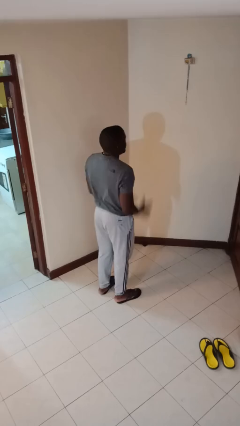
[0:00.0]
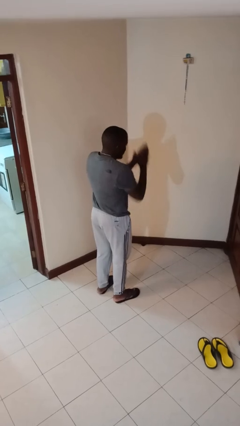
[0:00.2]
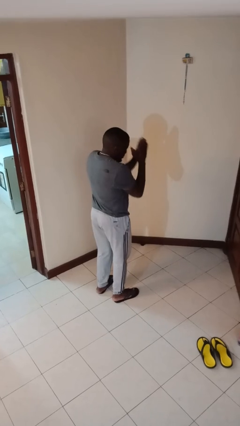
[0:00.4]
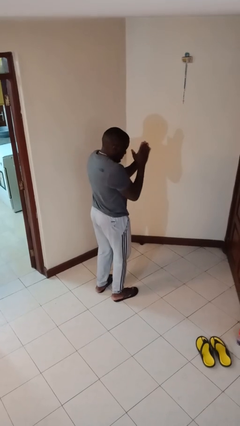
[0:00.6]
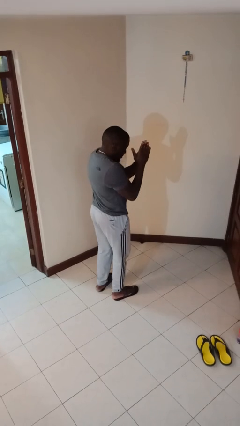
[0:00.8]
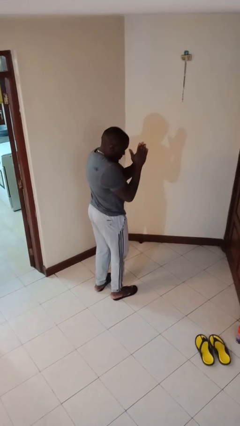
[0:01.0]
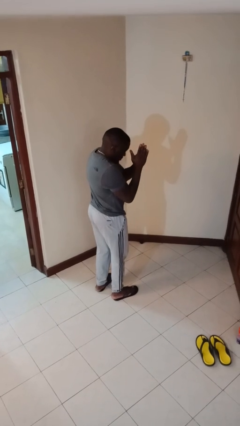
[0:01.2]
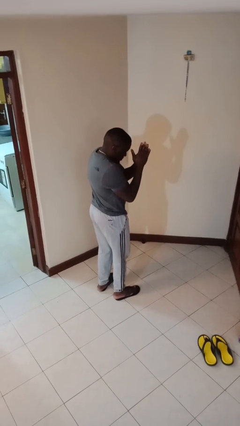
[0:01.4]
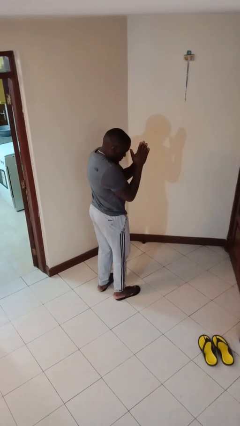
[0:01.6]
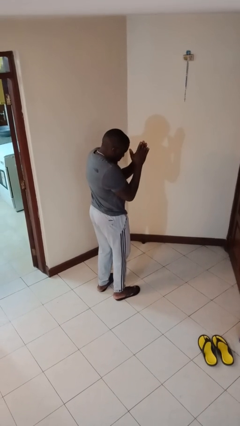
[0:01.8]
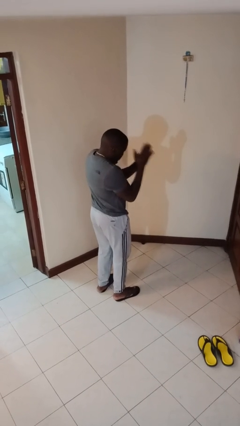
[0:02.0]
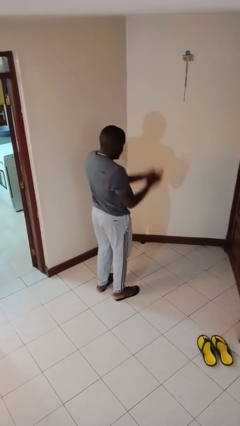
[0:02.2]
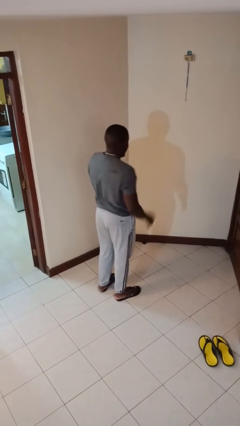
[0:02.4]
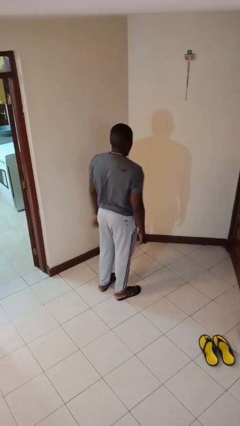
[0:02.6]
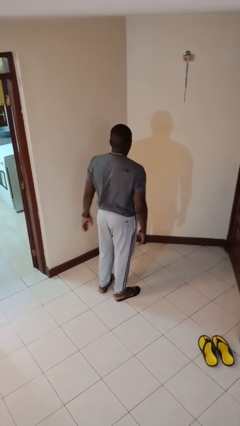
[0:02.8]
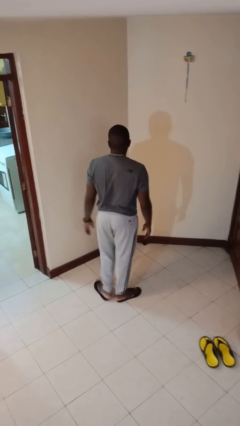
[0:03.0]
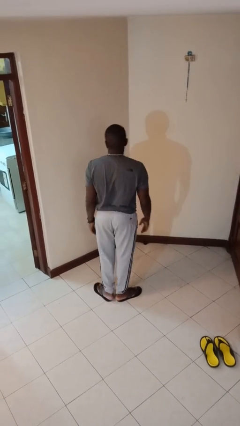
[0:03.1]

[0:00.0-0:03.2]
person prays

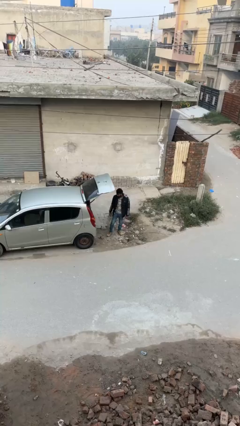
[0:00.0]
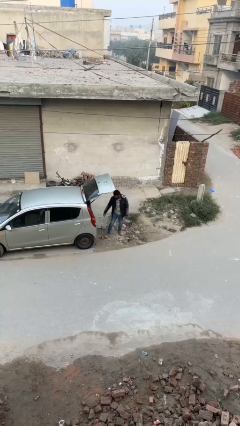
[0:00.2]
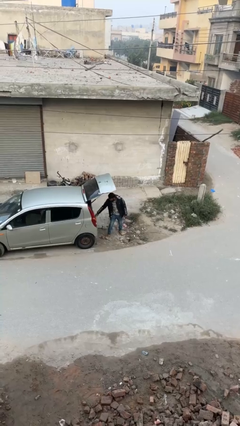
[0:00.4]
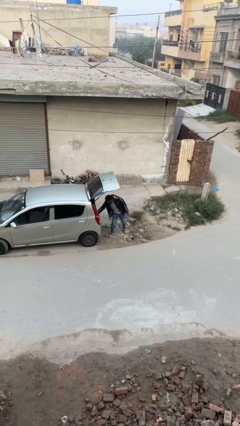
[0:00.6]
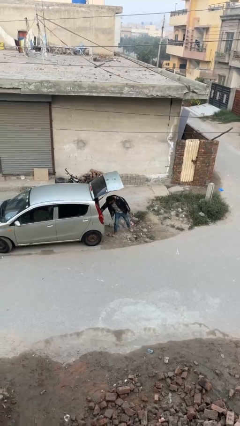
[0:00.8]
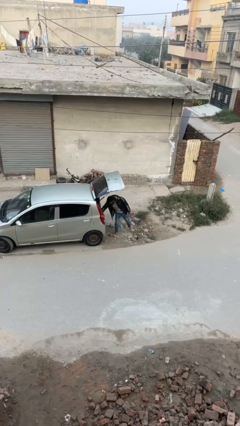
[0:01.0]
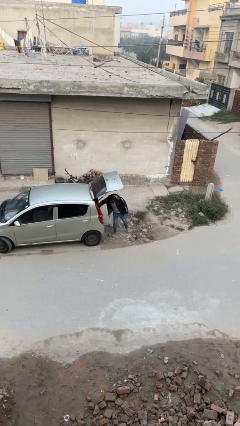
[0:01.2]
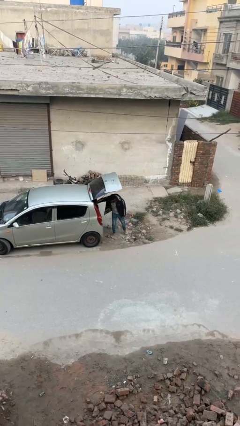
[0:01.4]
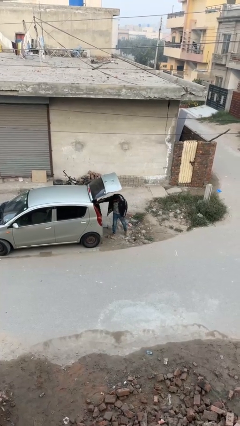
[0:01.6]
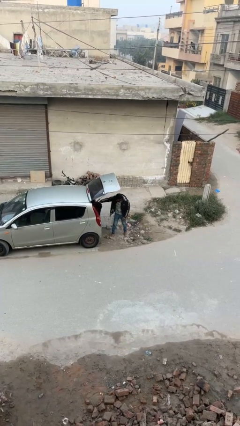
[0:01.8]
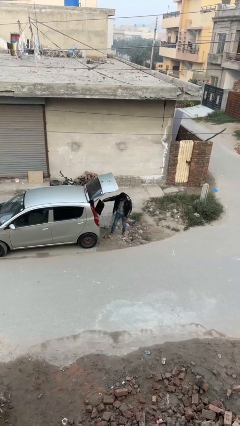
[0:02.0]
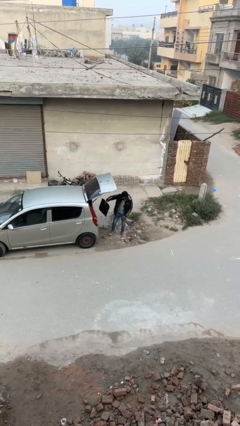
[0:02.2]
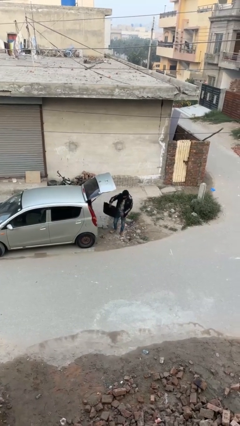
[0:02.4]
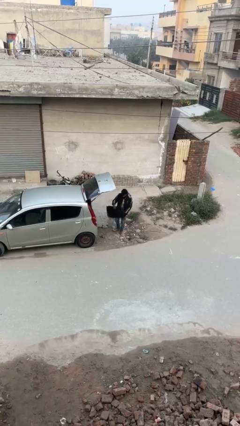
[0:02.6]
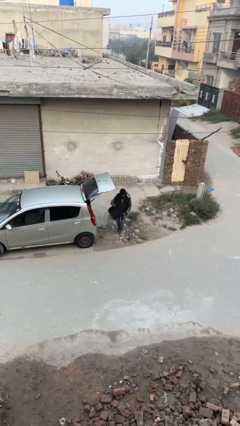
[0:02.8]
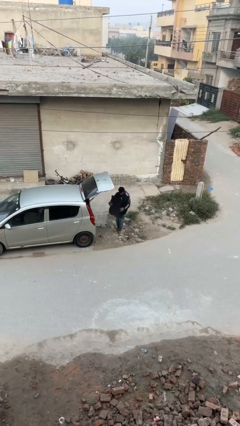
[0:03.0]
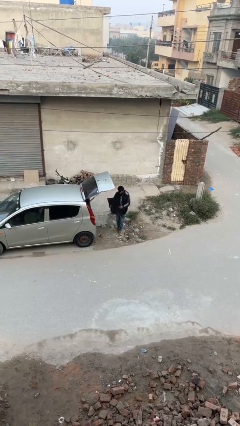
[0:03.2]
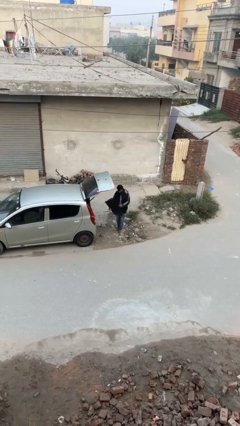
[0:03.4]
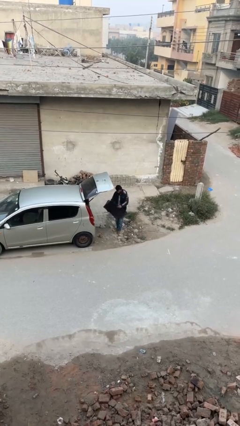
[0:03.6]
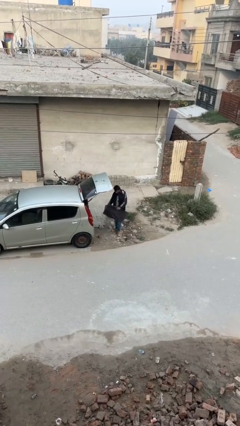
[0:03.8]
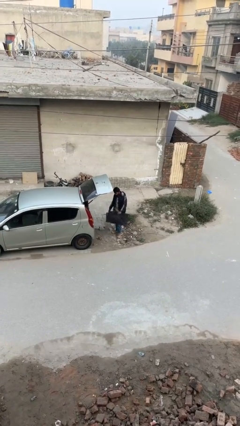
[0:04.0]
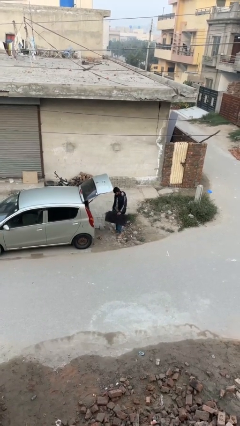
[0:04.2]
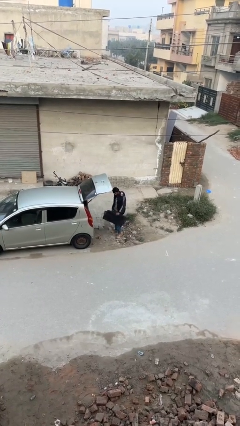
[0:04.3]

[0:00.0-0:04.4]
person unloads car

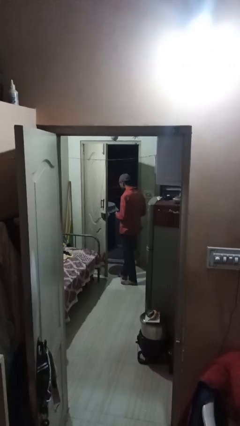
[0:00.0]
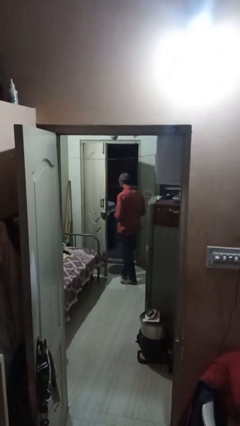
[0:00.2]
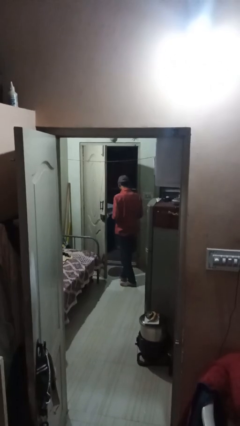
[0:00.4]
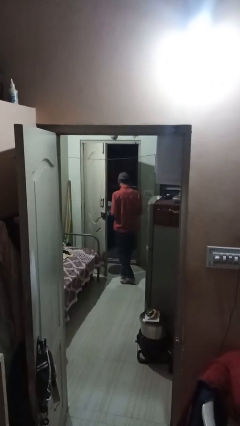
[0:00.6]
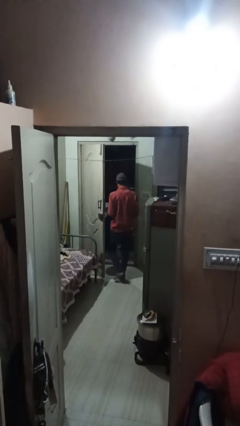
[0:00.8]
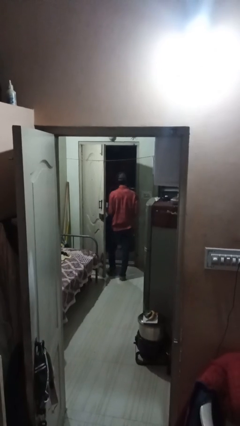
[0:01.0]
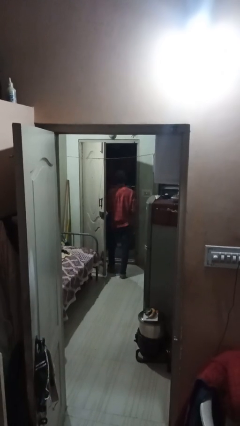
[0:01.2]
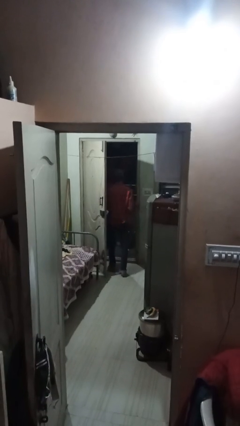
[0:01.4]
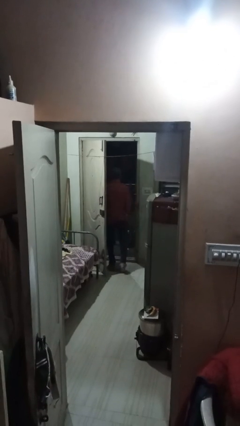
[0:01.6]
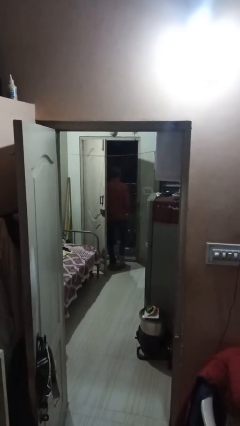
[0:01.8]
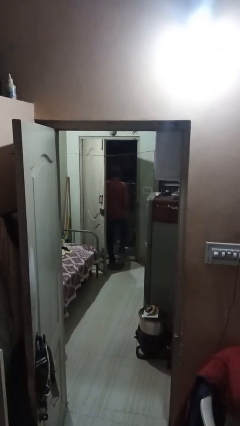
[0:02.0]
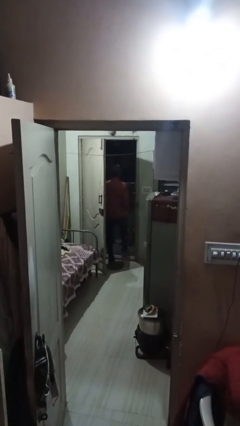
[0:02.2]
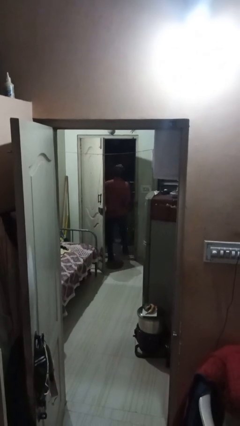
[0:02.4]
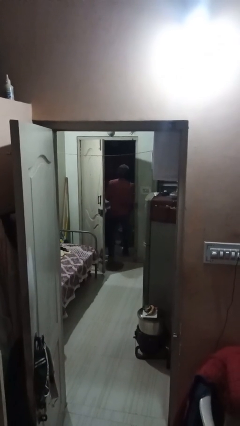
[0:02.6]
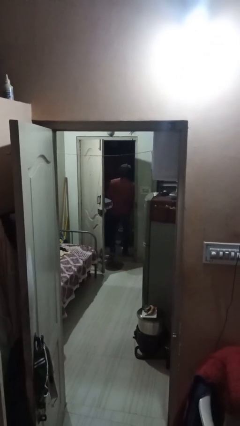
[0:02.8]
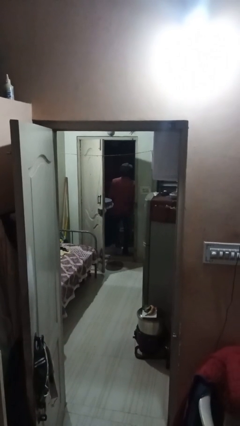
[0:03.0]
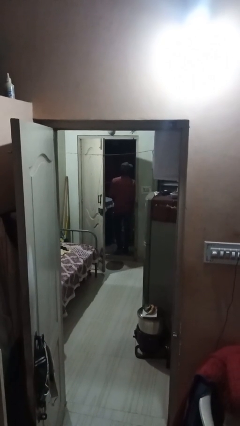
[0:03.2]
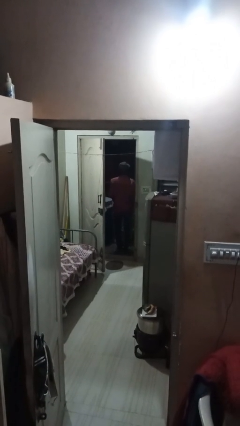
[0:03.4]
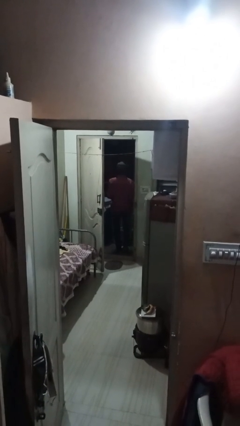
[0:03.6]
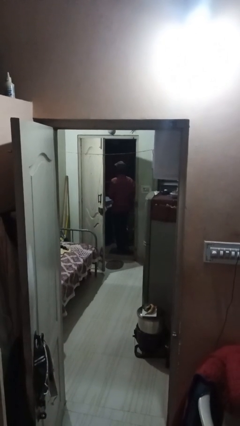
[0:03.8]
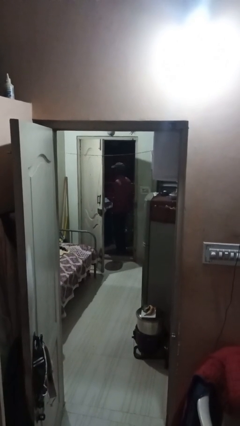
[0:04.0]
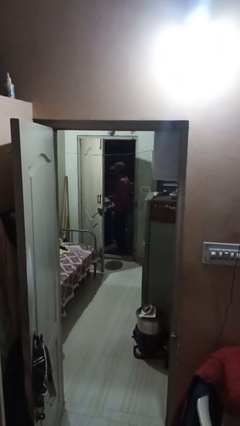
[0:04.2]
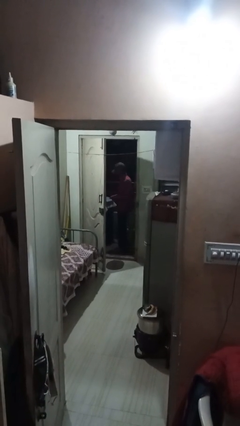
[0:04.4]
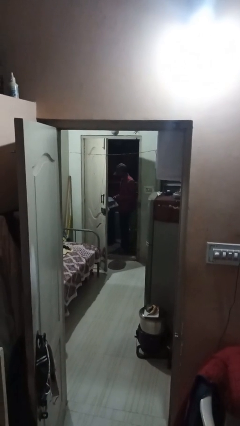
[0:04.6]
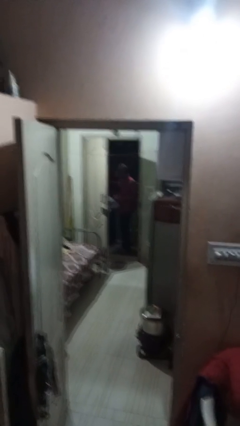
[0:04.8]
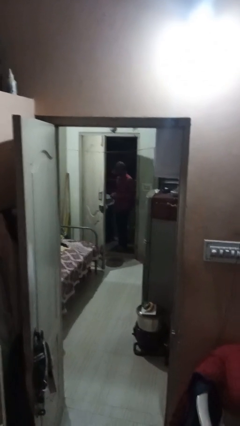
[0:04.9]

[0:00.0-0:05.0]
person exits scene through structure

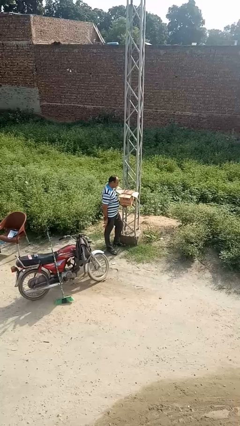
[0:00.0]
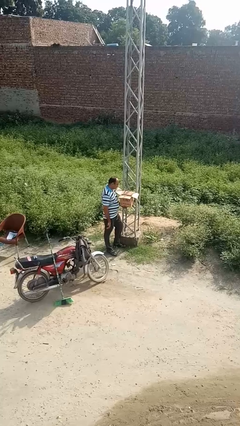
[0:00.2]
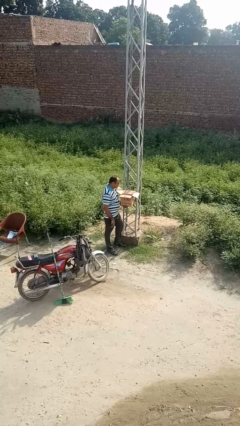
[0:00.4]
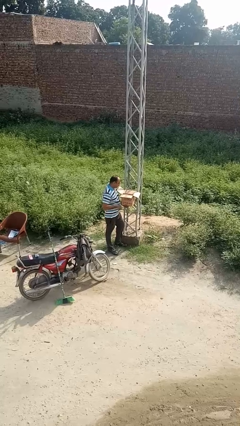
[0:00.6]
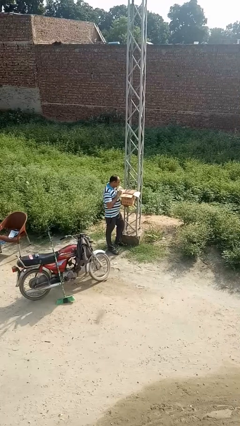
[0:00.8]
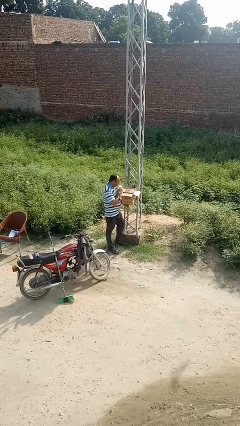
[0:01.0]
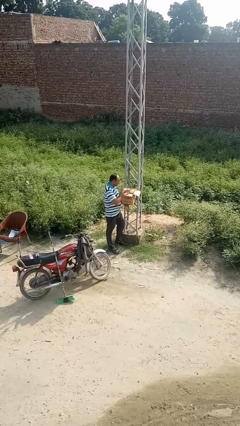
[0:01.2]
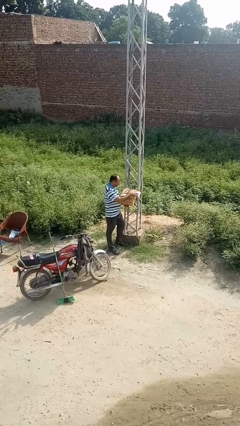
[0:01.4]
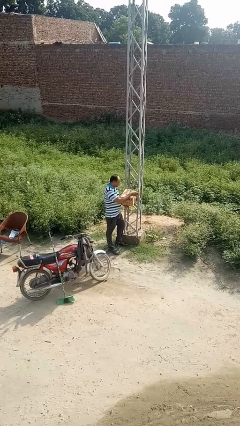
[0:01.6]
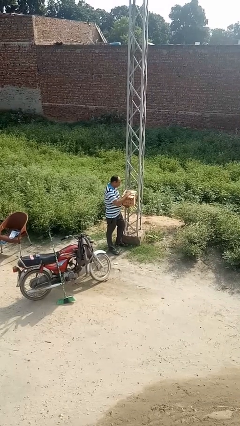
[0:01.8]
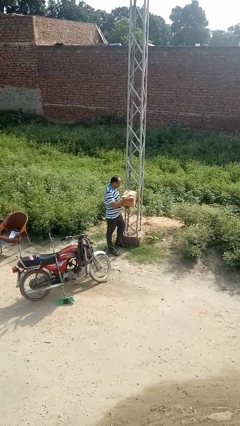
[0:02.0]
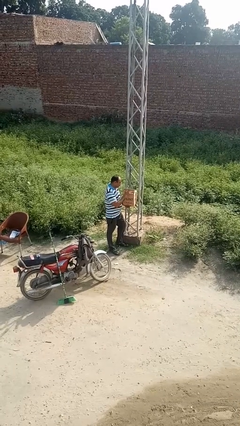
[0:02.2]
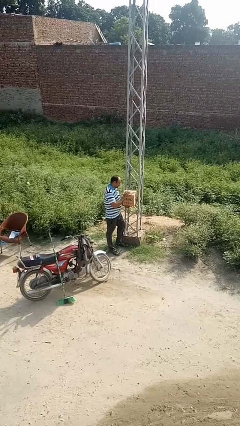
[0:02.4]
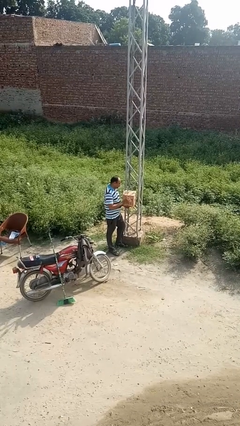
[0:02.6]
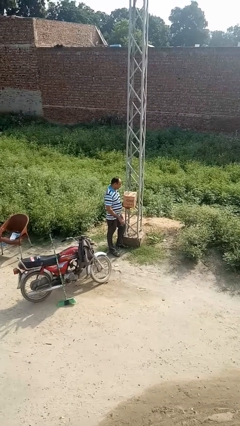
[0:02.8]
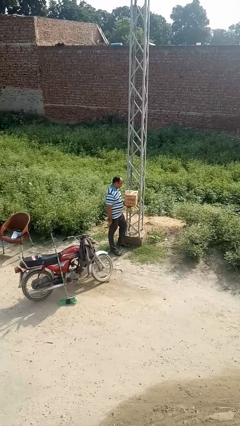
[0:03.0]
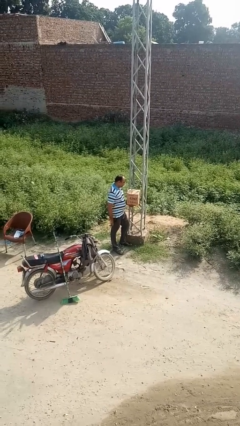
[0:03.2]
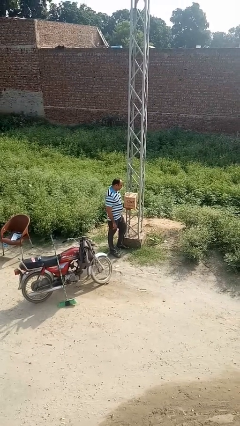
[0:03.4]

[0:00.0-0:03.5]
person closes mailbox

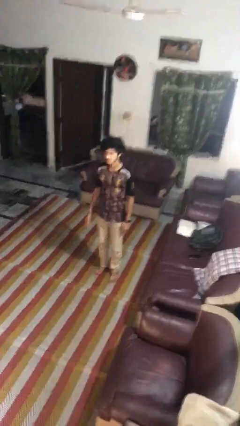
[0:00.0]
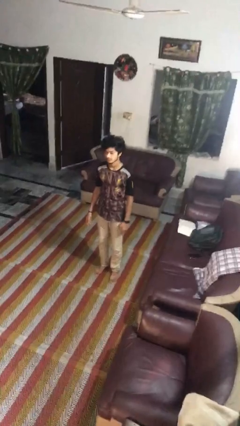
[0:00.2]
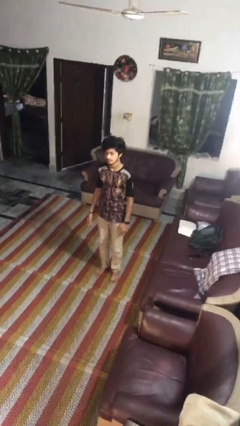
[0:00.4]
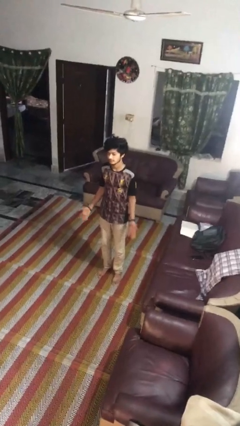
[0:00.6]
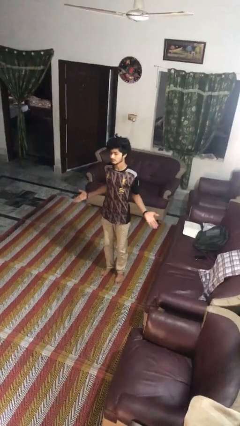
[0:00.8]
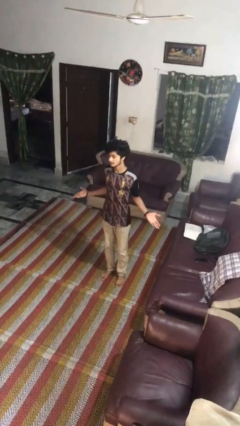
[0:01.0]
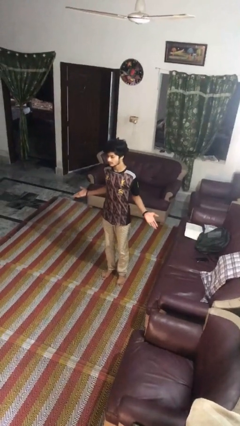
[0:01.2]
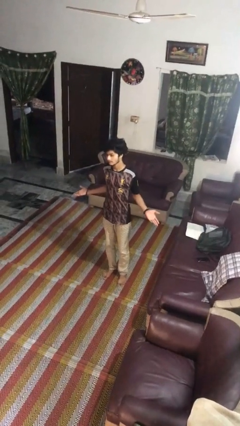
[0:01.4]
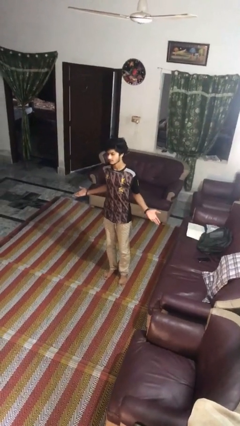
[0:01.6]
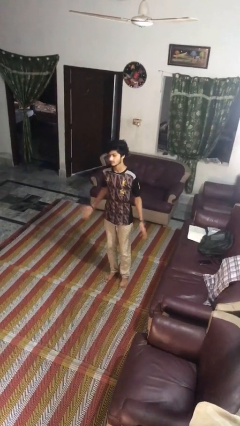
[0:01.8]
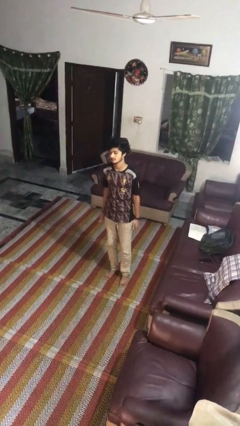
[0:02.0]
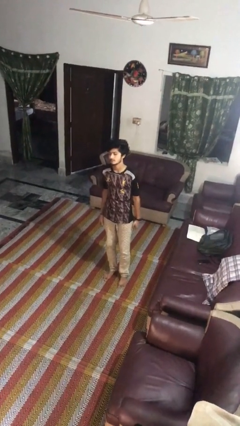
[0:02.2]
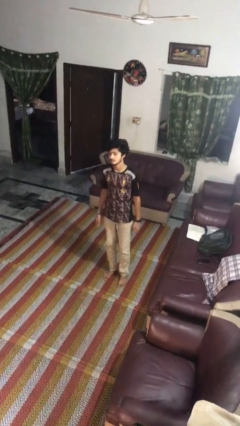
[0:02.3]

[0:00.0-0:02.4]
person shrugs
